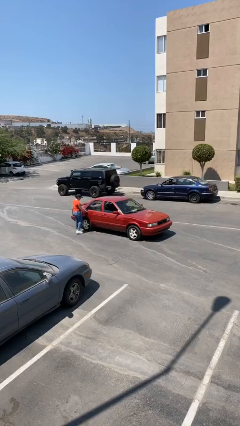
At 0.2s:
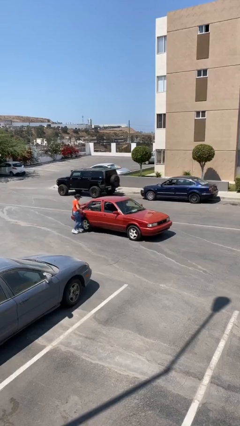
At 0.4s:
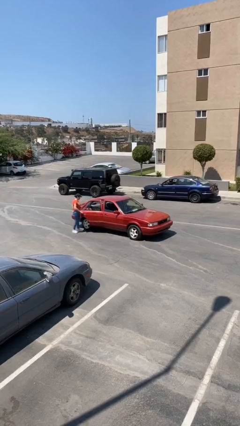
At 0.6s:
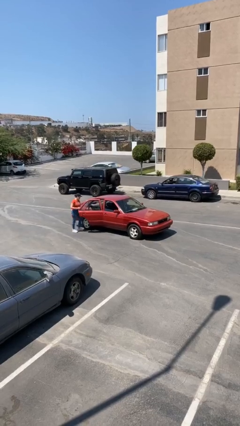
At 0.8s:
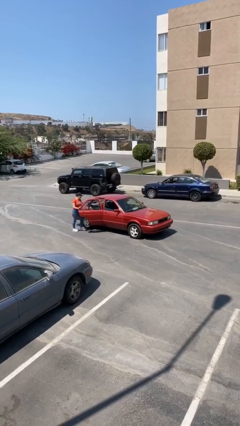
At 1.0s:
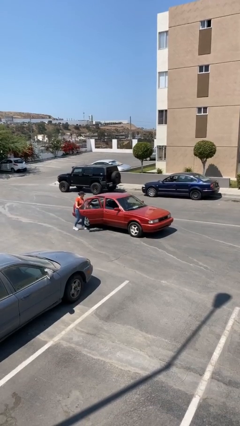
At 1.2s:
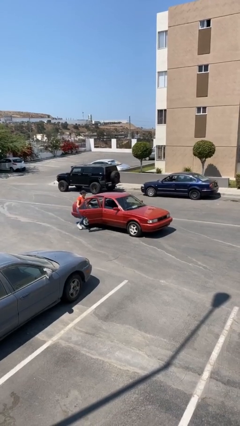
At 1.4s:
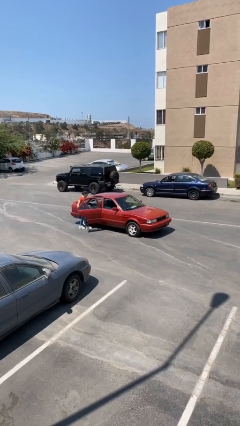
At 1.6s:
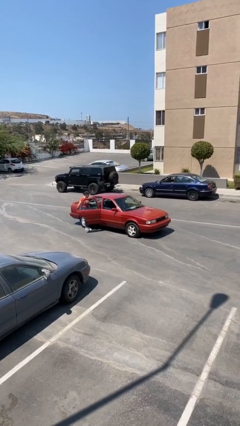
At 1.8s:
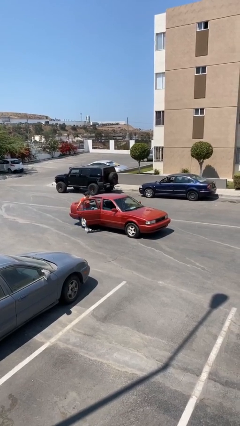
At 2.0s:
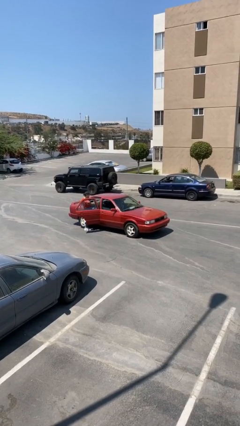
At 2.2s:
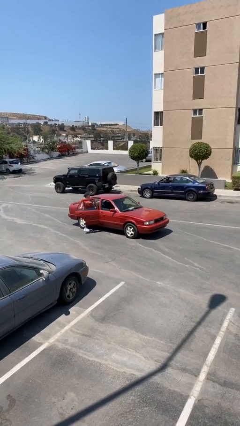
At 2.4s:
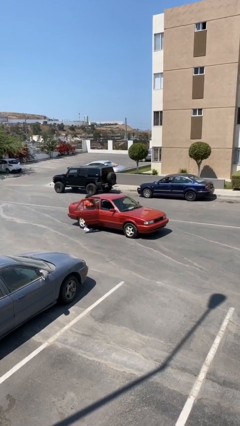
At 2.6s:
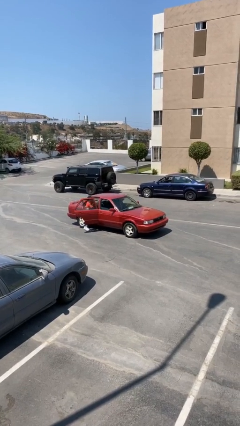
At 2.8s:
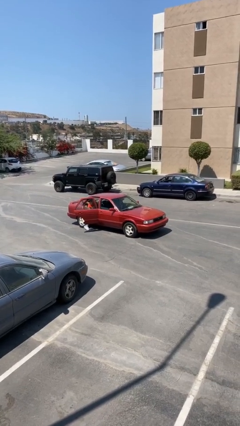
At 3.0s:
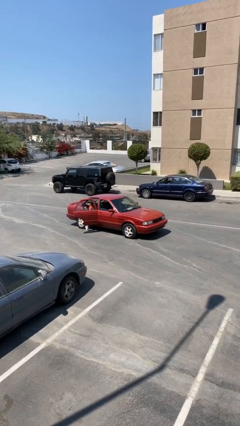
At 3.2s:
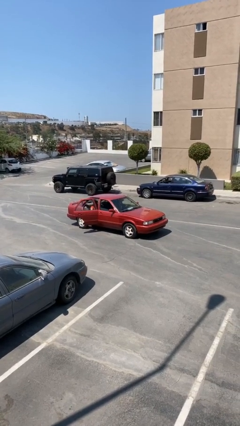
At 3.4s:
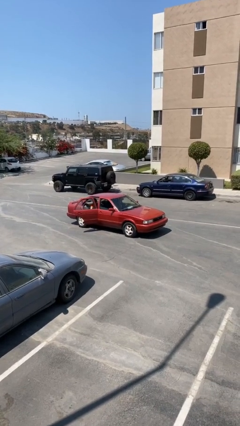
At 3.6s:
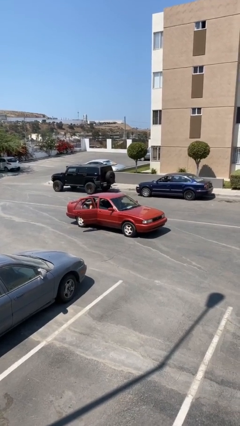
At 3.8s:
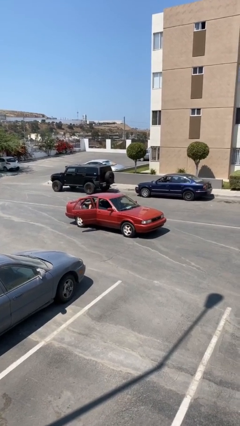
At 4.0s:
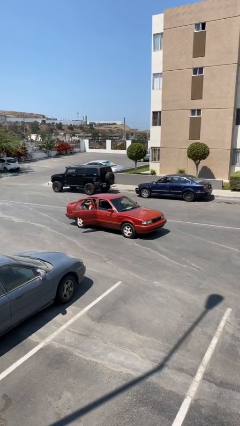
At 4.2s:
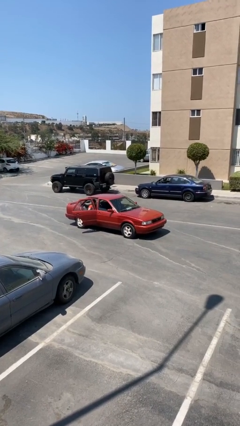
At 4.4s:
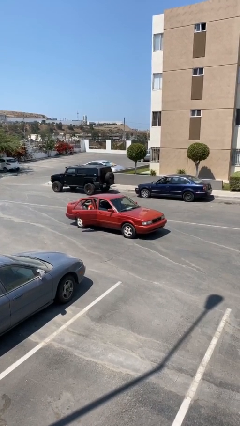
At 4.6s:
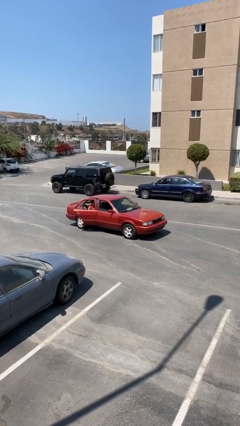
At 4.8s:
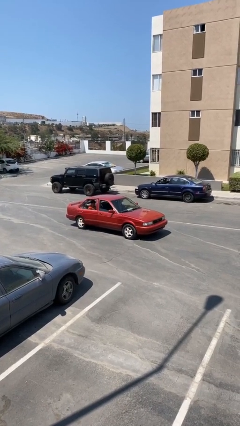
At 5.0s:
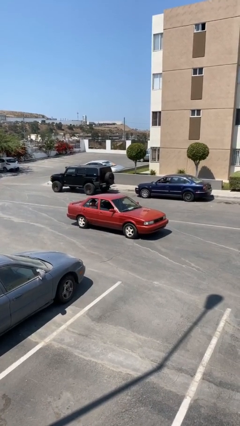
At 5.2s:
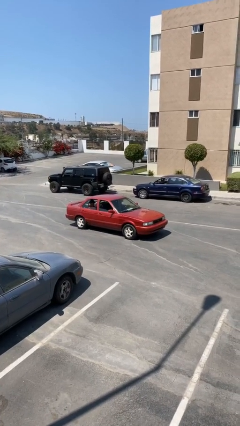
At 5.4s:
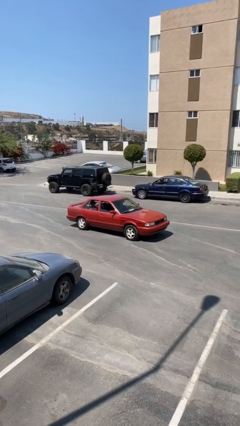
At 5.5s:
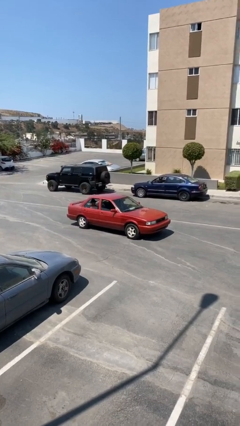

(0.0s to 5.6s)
car picks up person

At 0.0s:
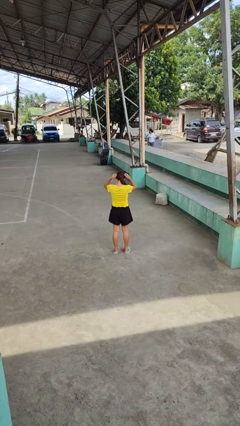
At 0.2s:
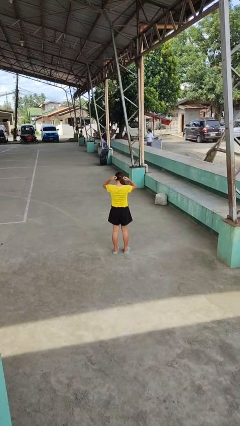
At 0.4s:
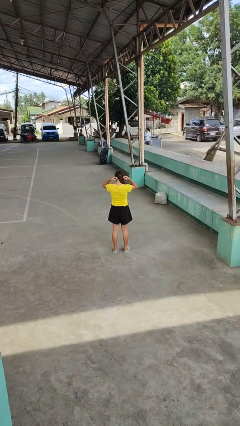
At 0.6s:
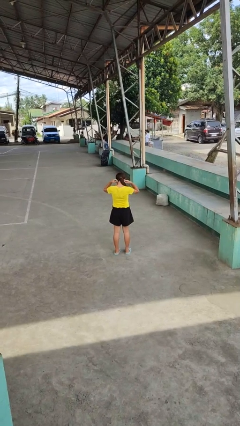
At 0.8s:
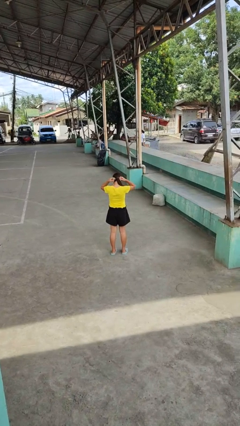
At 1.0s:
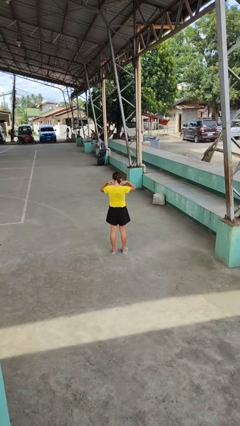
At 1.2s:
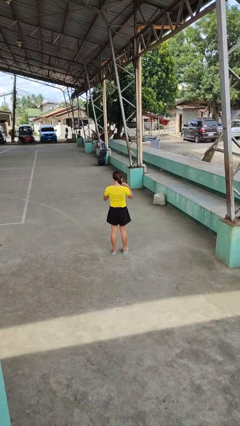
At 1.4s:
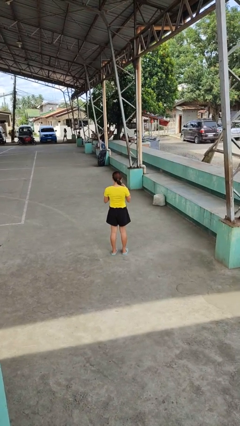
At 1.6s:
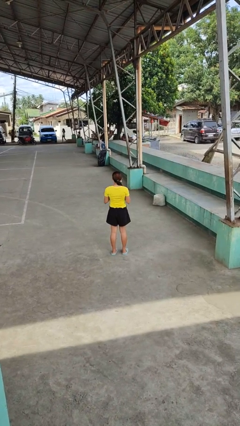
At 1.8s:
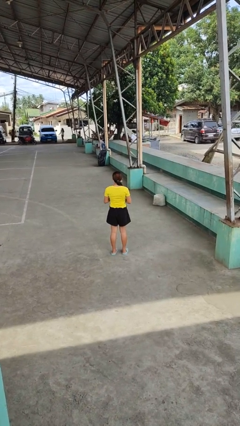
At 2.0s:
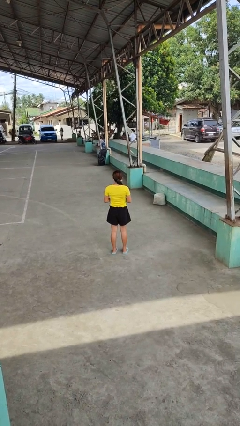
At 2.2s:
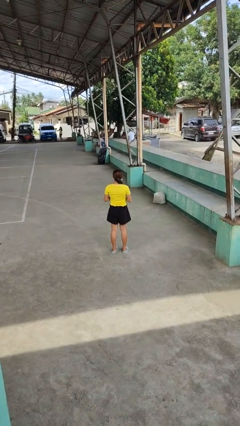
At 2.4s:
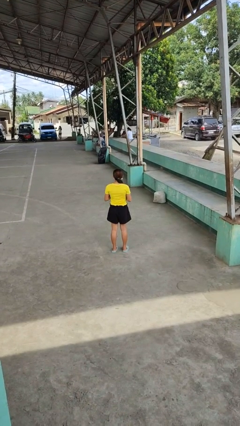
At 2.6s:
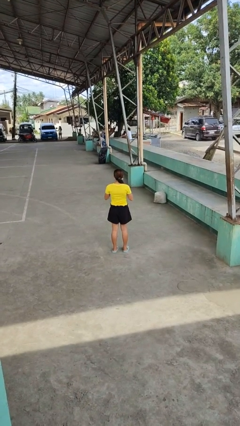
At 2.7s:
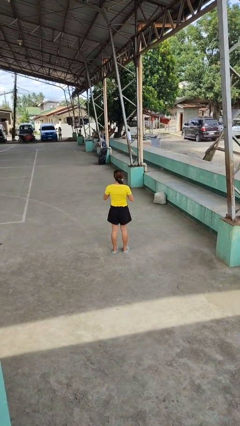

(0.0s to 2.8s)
person puts on necklace

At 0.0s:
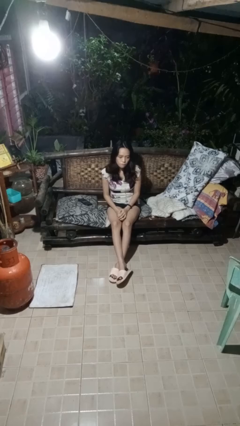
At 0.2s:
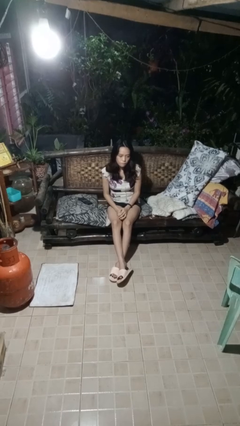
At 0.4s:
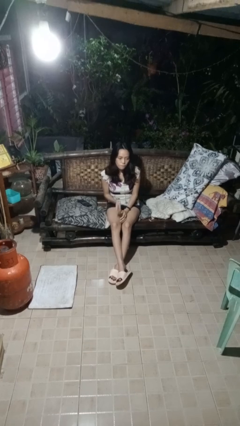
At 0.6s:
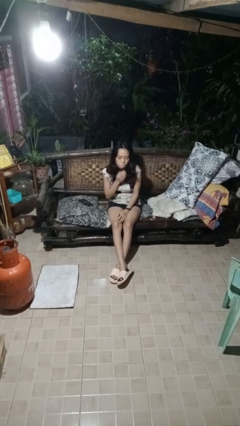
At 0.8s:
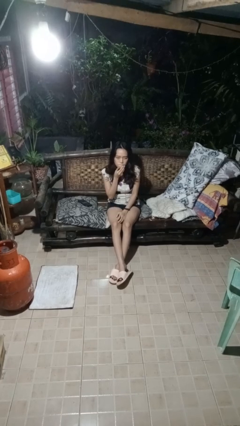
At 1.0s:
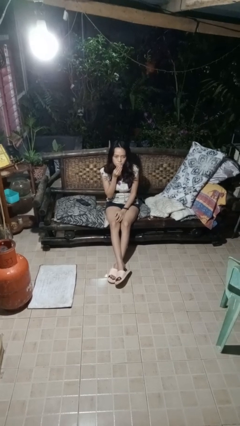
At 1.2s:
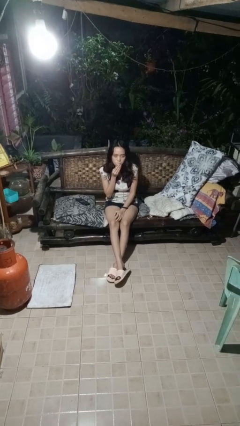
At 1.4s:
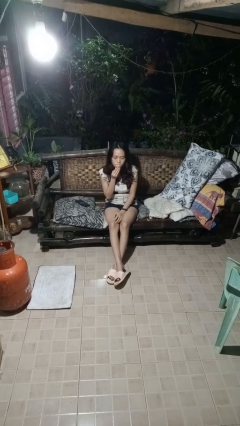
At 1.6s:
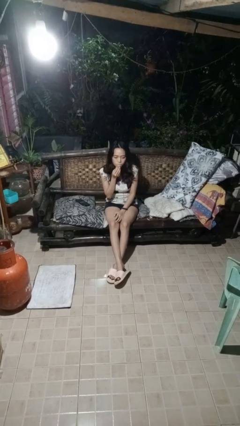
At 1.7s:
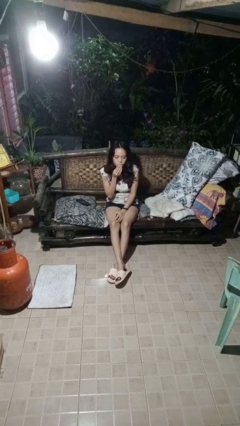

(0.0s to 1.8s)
person strokes chin

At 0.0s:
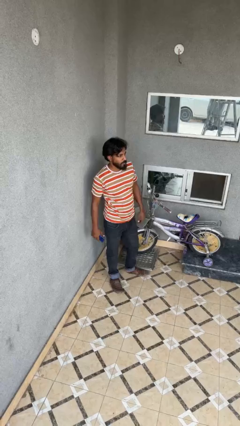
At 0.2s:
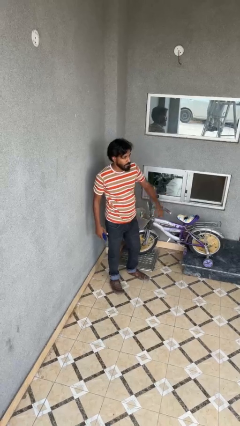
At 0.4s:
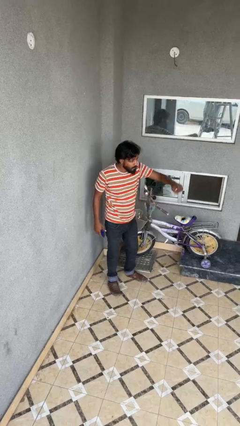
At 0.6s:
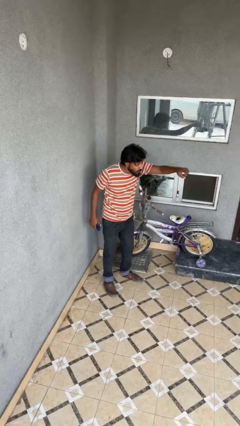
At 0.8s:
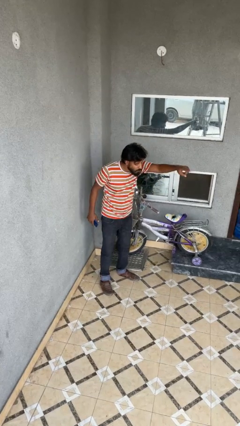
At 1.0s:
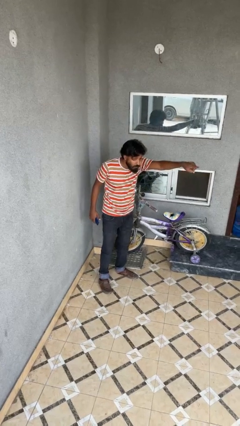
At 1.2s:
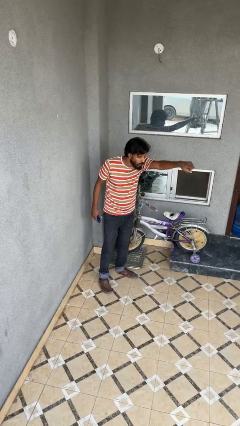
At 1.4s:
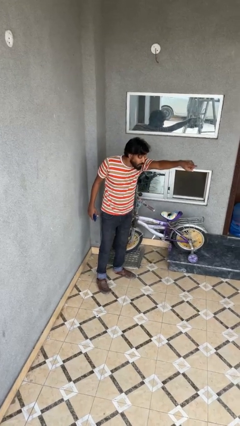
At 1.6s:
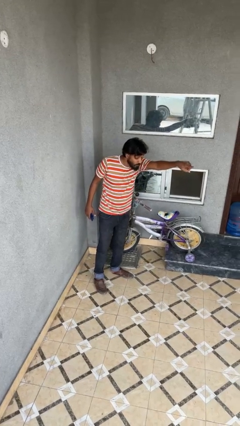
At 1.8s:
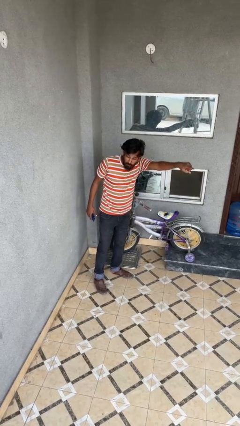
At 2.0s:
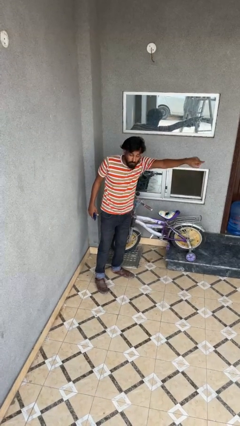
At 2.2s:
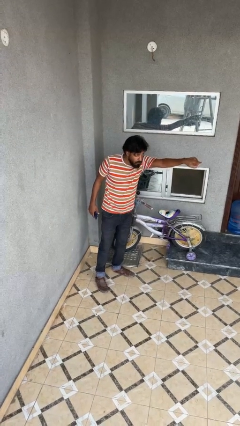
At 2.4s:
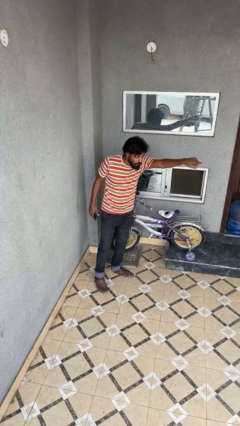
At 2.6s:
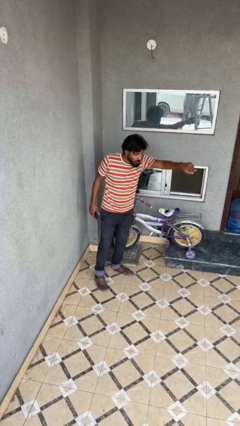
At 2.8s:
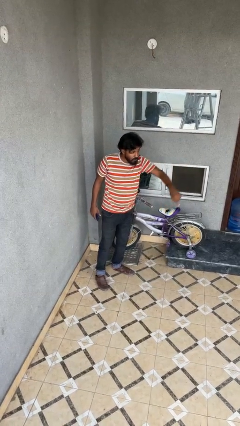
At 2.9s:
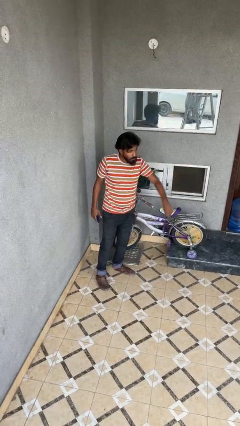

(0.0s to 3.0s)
person points at person

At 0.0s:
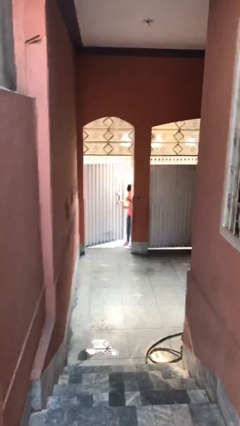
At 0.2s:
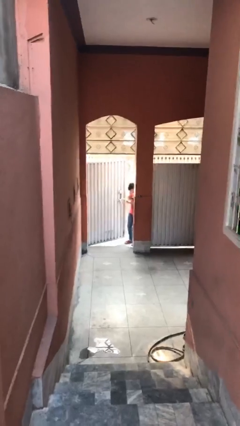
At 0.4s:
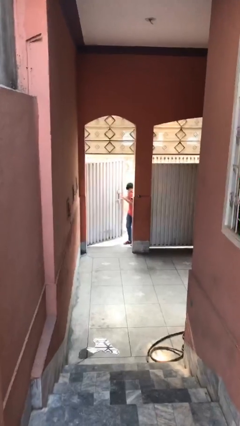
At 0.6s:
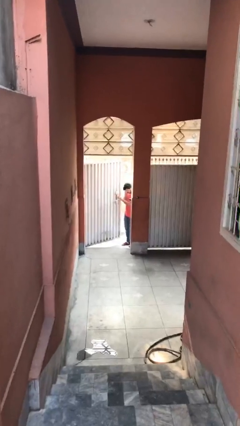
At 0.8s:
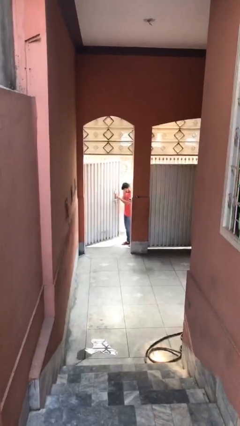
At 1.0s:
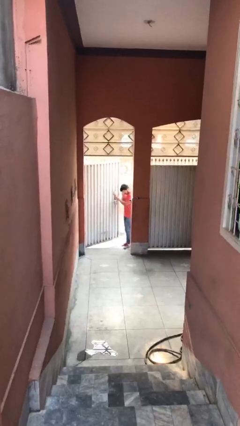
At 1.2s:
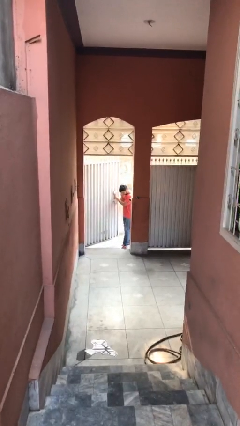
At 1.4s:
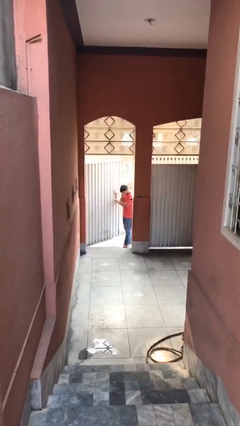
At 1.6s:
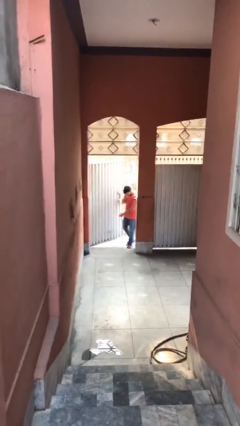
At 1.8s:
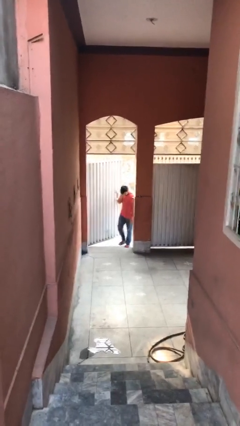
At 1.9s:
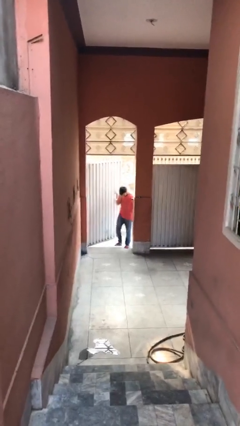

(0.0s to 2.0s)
person opens facility door

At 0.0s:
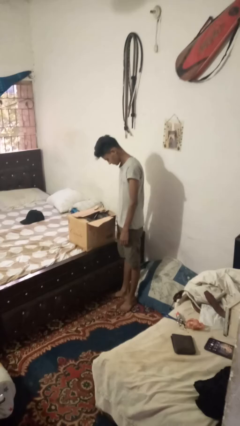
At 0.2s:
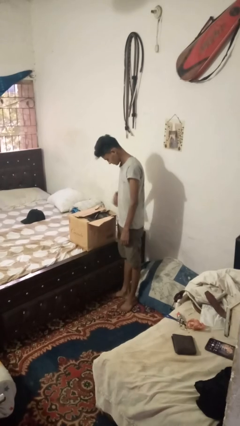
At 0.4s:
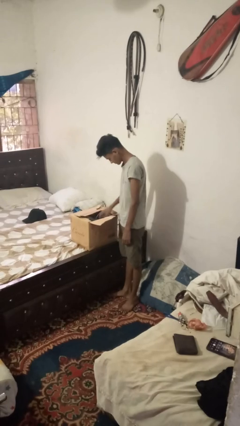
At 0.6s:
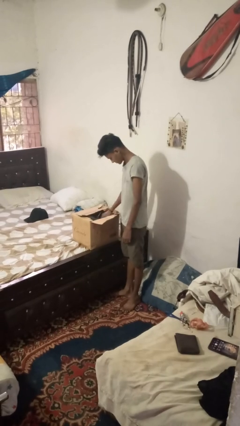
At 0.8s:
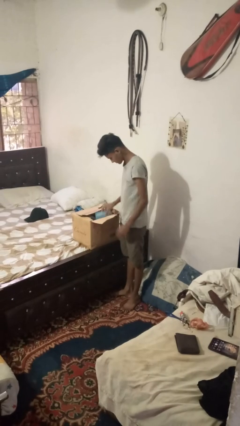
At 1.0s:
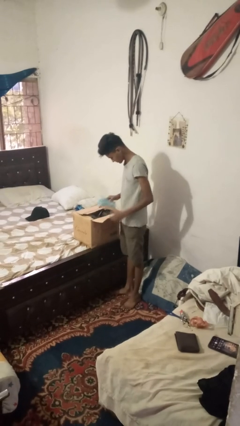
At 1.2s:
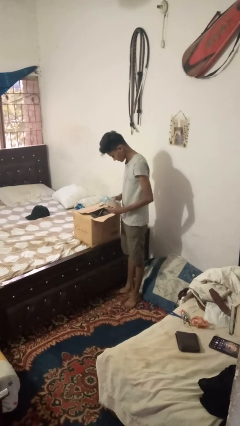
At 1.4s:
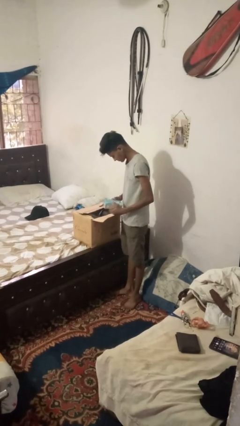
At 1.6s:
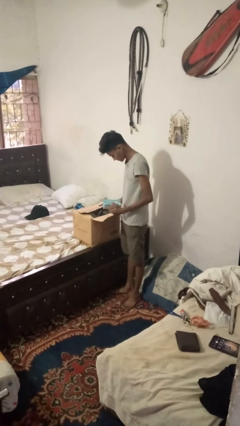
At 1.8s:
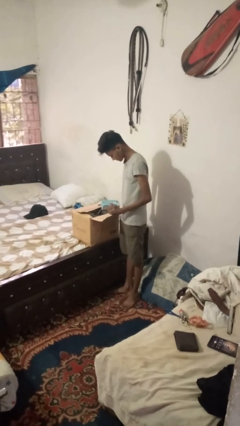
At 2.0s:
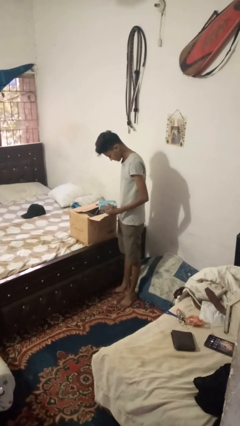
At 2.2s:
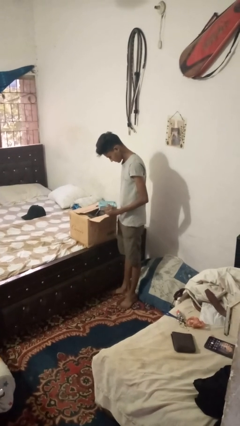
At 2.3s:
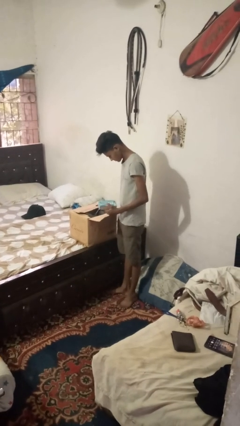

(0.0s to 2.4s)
person takes object from box
